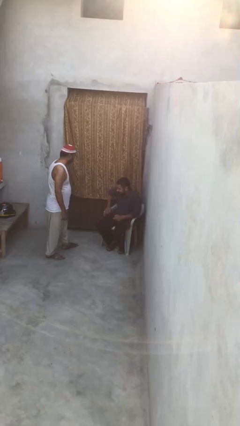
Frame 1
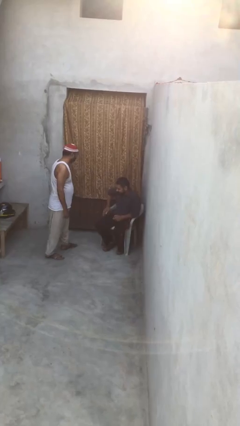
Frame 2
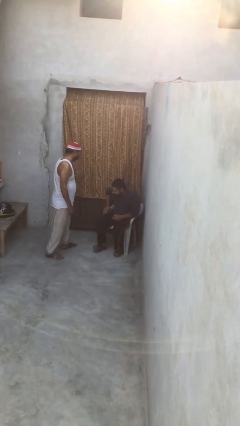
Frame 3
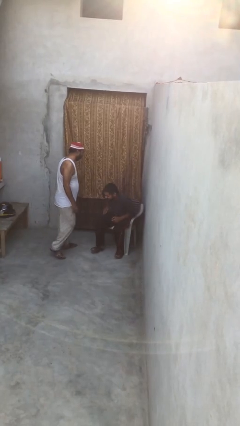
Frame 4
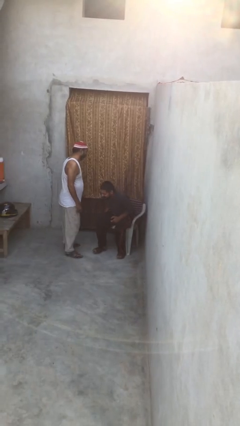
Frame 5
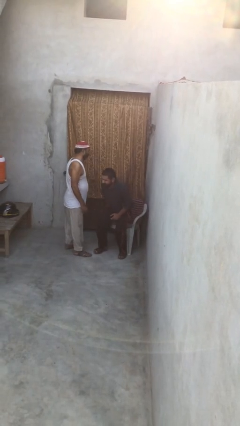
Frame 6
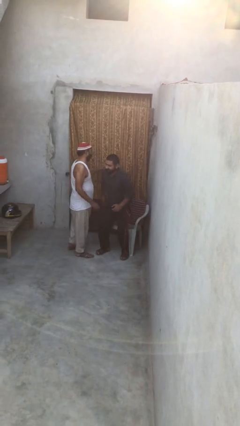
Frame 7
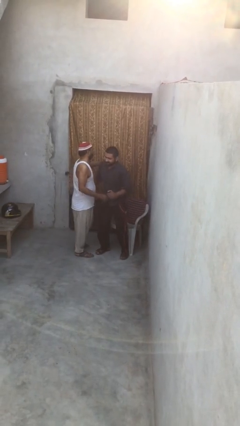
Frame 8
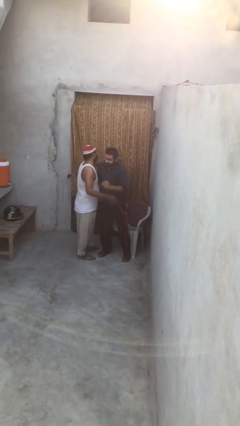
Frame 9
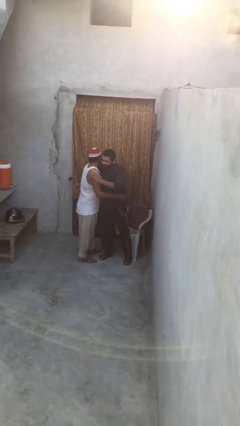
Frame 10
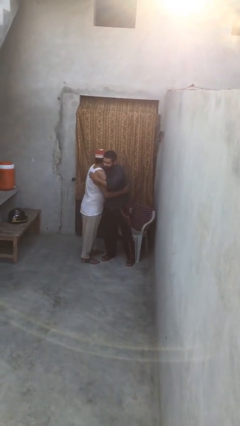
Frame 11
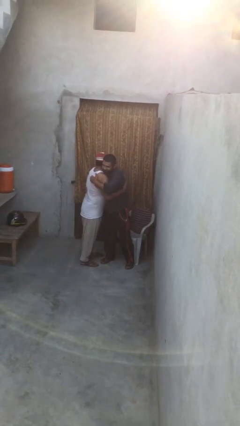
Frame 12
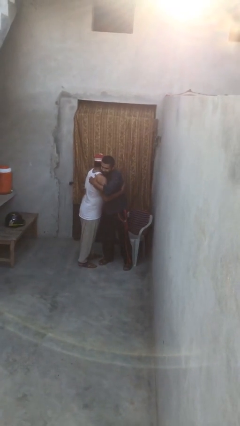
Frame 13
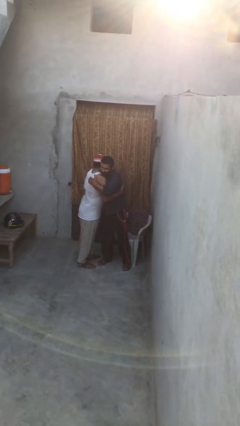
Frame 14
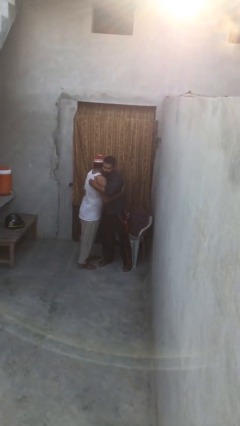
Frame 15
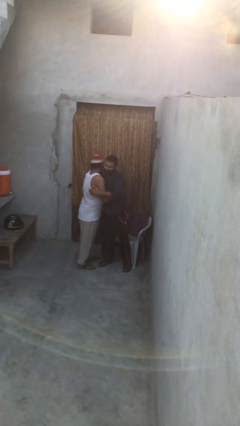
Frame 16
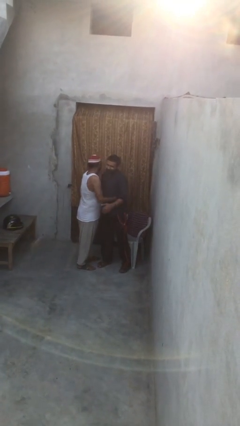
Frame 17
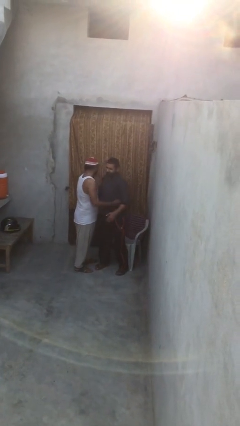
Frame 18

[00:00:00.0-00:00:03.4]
person embraces person

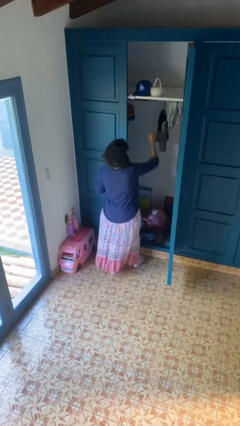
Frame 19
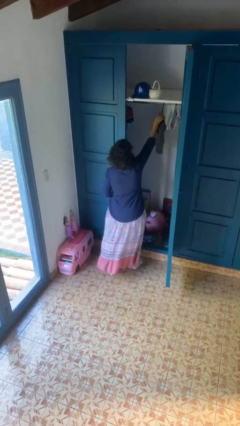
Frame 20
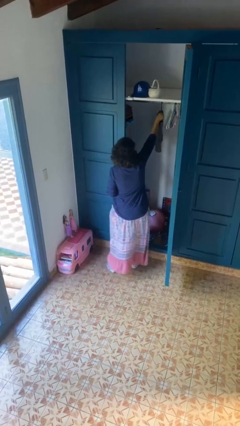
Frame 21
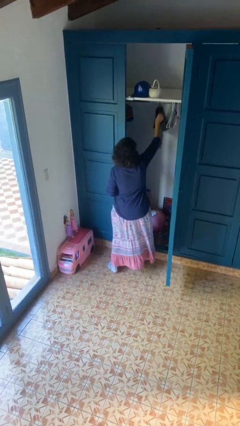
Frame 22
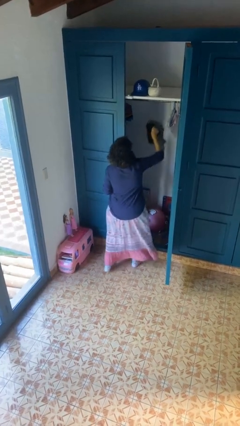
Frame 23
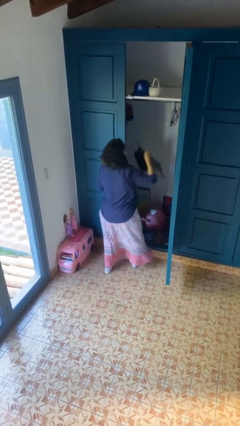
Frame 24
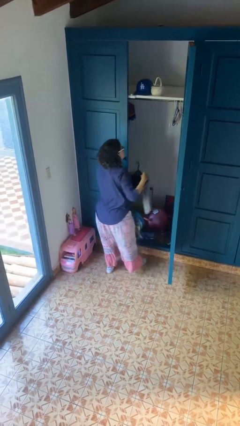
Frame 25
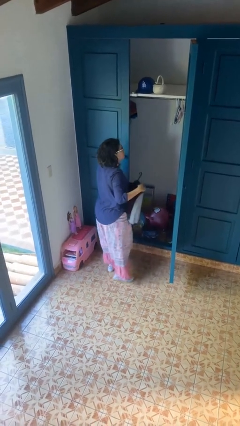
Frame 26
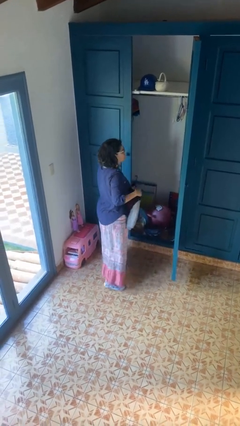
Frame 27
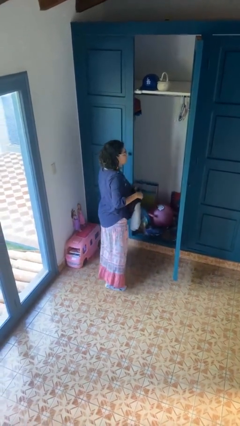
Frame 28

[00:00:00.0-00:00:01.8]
person takes clothes from closet

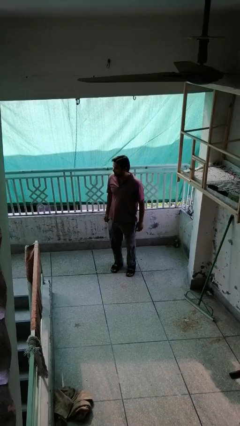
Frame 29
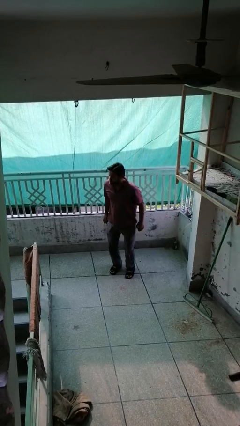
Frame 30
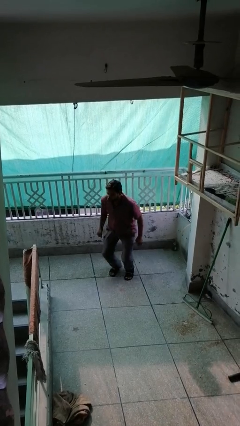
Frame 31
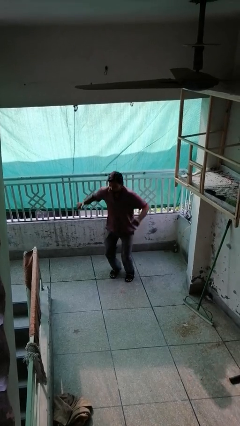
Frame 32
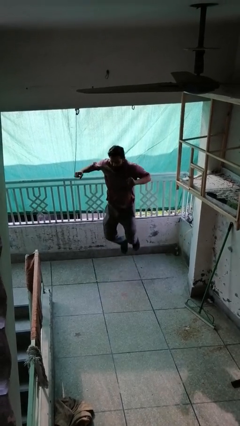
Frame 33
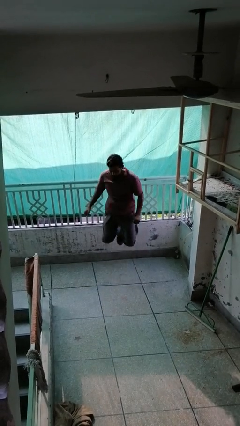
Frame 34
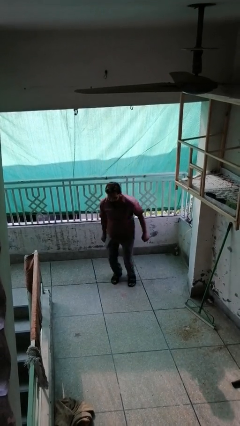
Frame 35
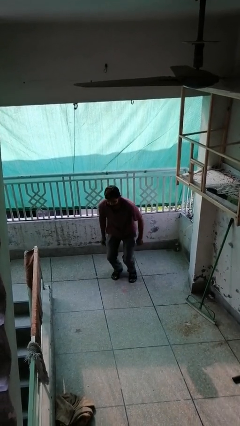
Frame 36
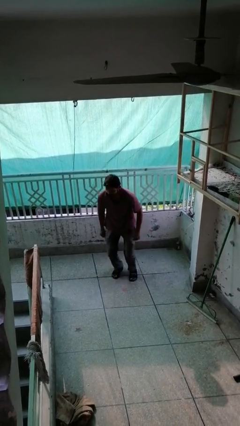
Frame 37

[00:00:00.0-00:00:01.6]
person jumps

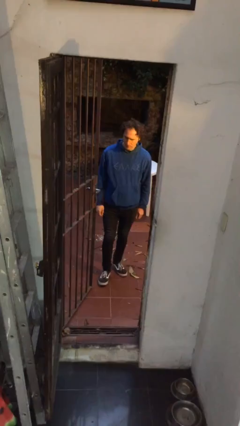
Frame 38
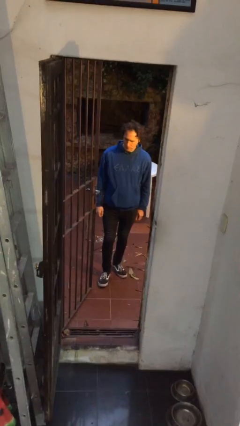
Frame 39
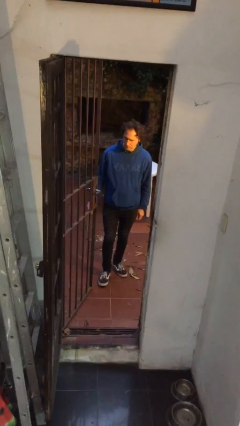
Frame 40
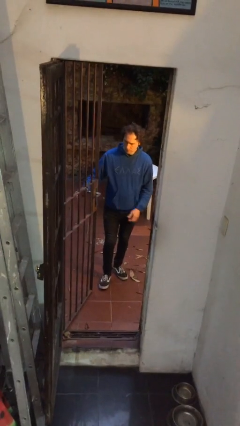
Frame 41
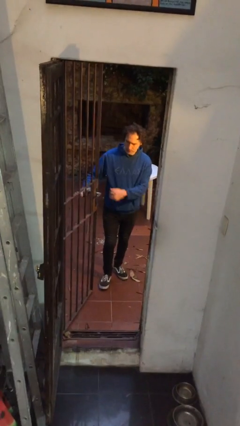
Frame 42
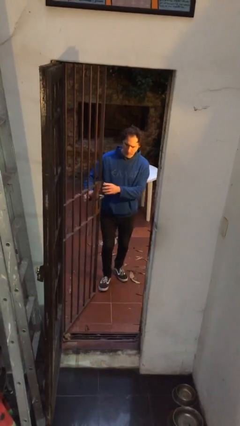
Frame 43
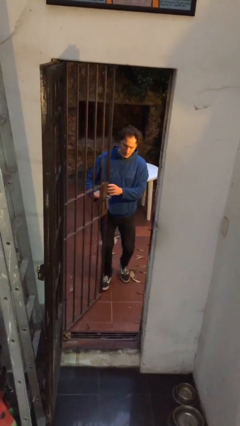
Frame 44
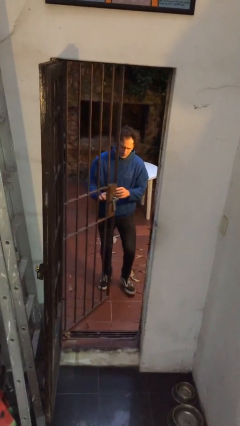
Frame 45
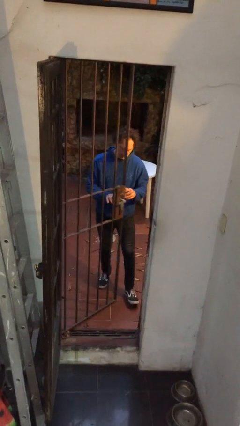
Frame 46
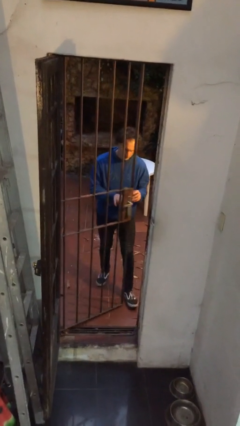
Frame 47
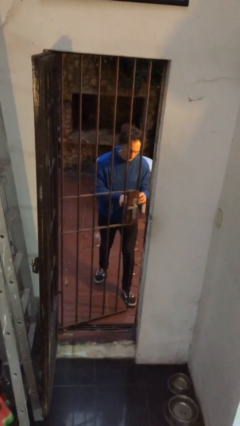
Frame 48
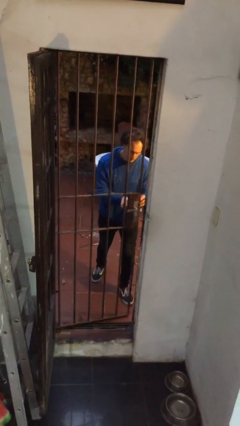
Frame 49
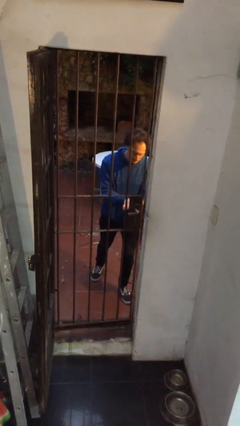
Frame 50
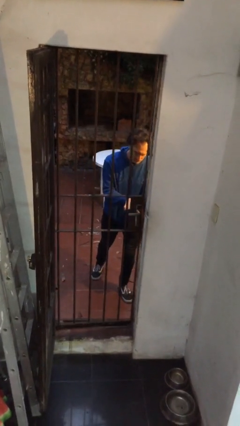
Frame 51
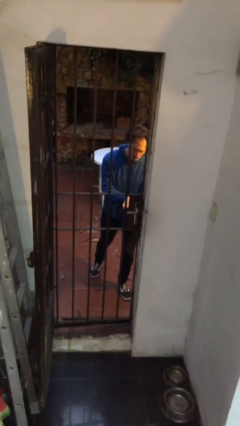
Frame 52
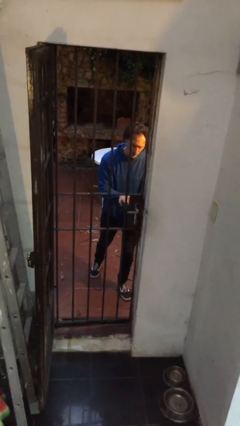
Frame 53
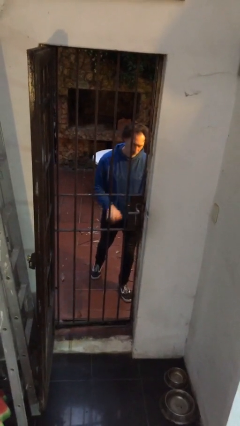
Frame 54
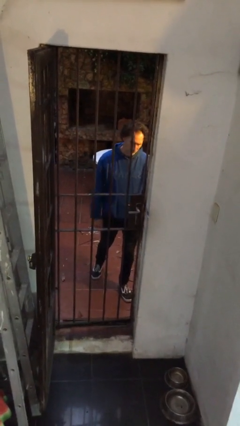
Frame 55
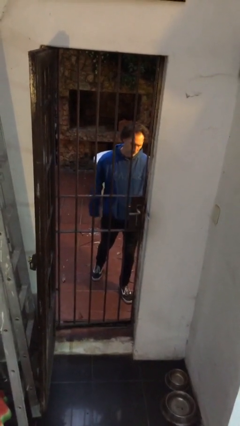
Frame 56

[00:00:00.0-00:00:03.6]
person closes gate

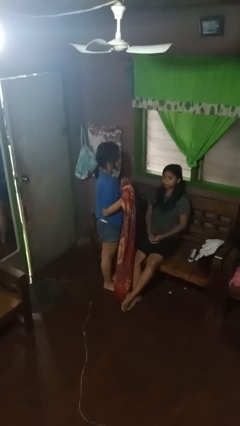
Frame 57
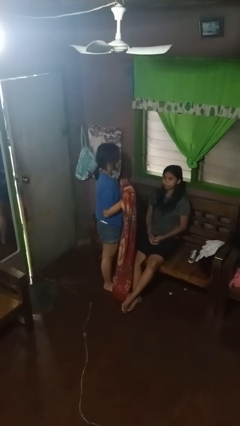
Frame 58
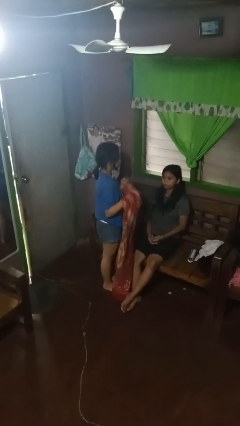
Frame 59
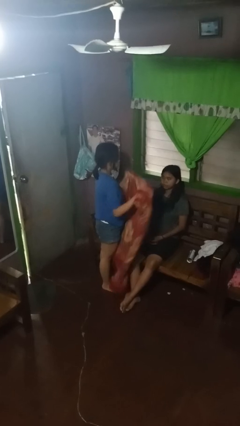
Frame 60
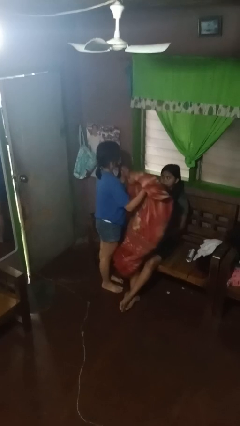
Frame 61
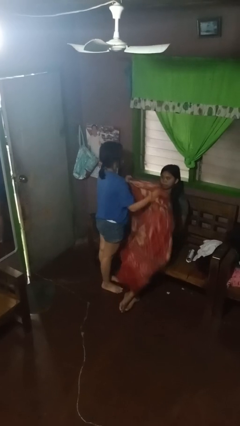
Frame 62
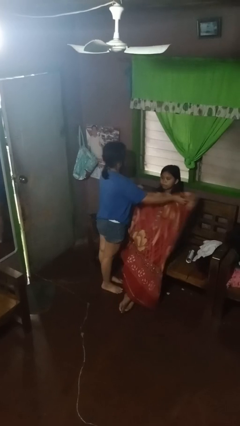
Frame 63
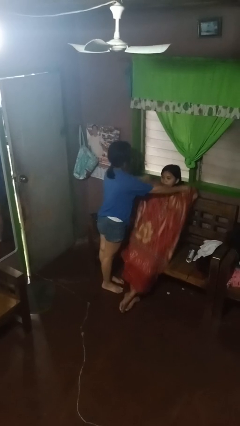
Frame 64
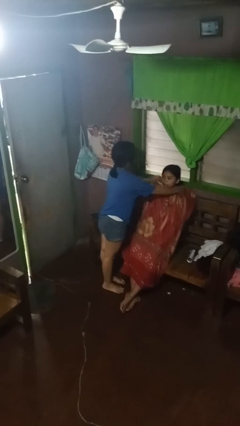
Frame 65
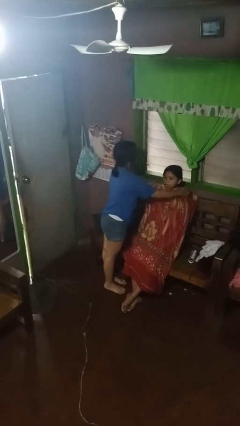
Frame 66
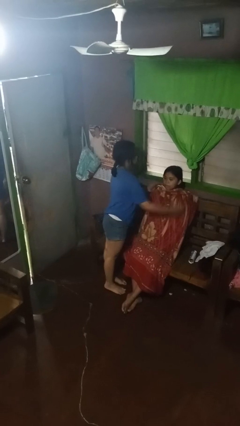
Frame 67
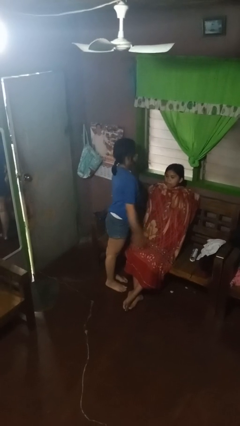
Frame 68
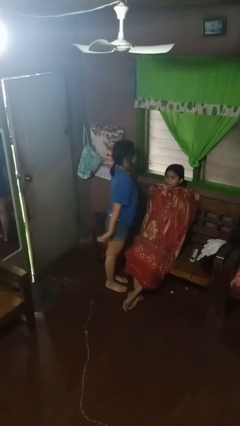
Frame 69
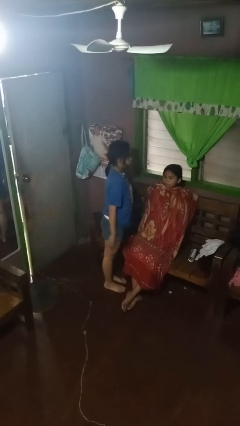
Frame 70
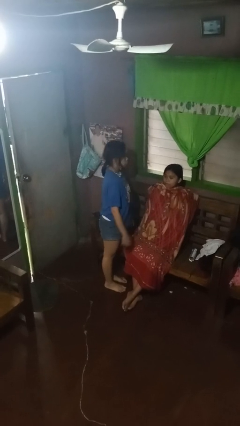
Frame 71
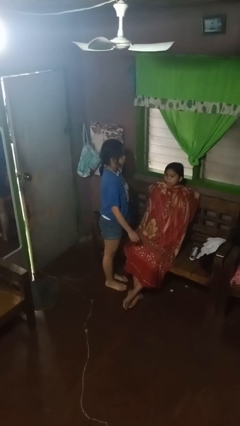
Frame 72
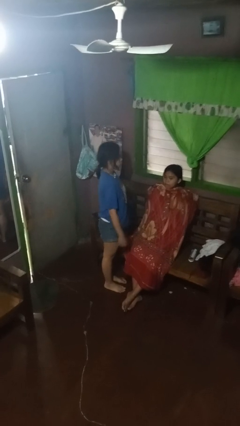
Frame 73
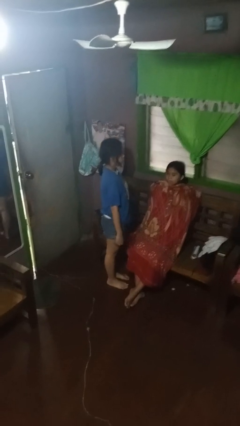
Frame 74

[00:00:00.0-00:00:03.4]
person covers friend with blanket

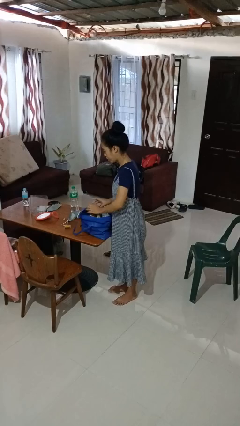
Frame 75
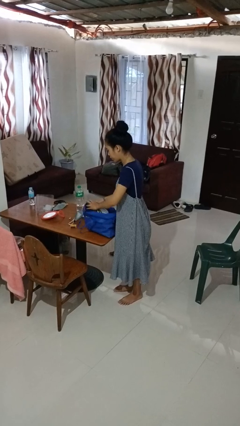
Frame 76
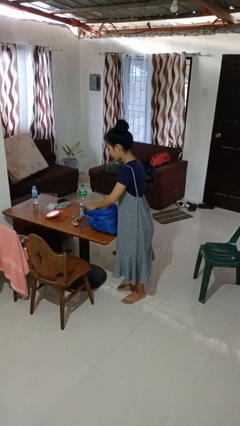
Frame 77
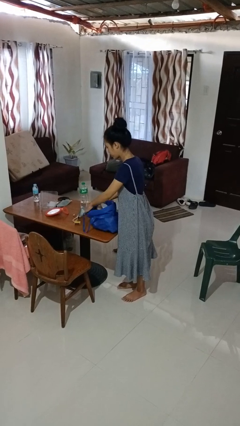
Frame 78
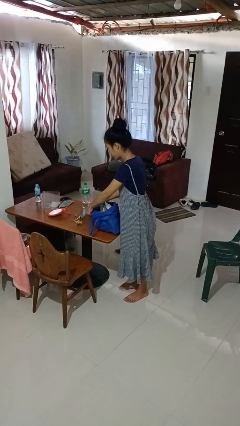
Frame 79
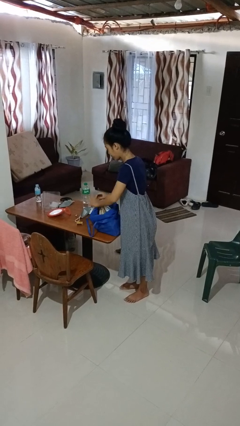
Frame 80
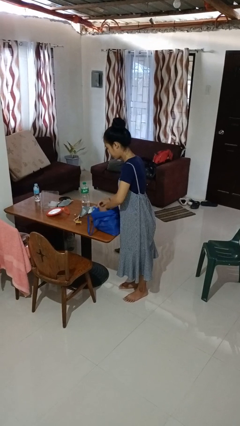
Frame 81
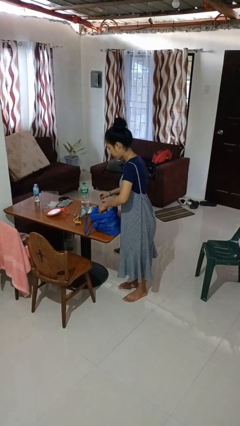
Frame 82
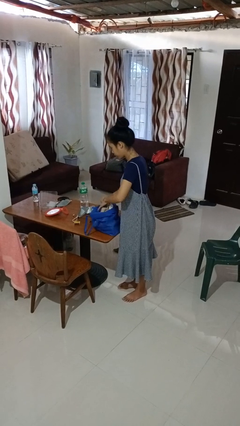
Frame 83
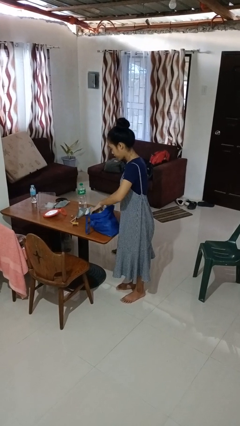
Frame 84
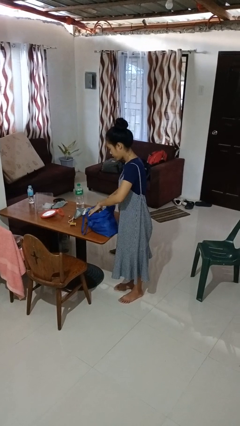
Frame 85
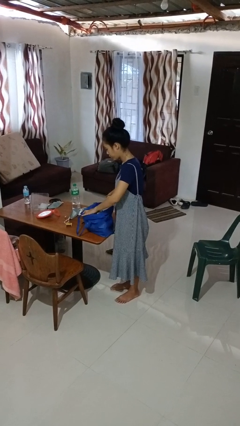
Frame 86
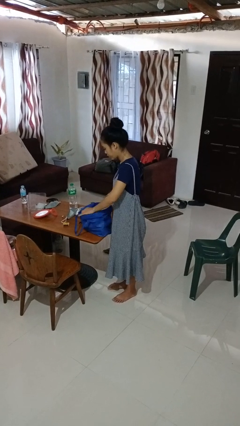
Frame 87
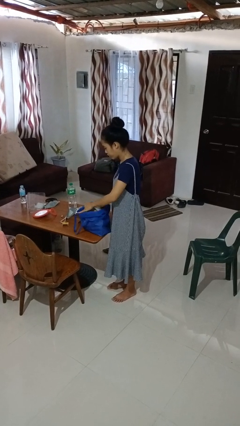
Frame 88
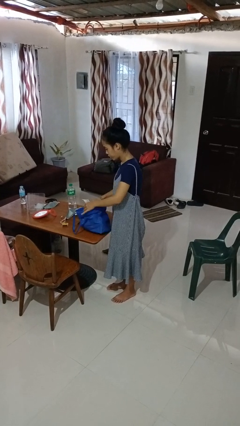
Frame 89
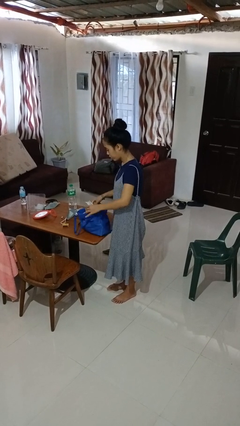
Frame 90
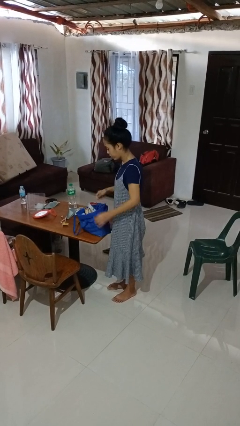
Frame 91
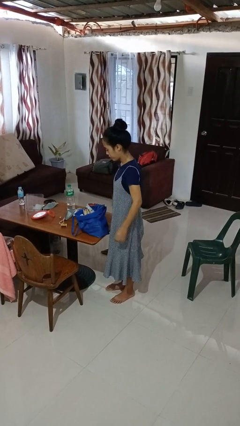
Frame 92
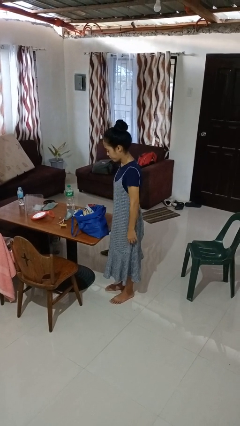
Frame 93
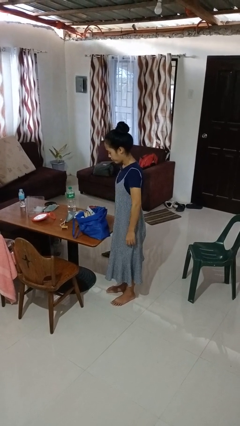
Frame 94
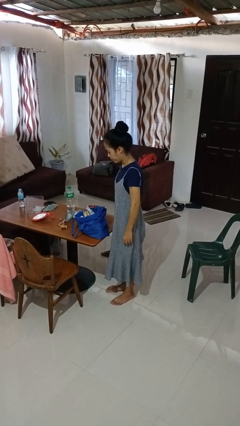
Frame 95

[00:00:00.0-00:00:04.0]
person searches in bag
